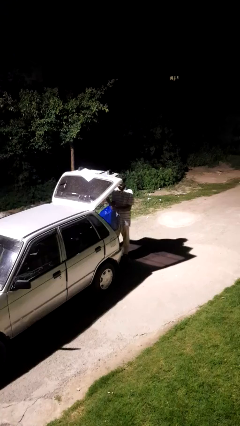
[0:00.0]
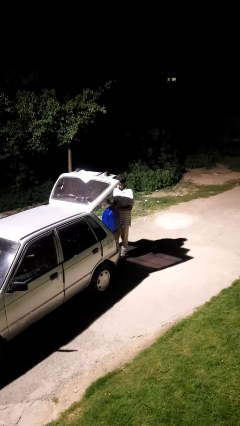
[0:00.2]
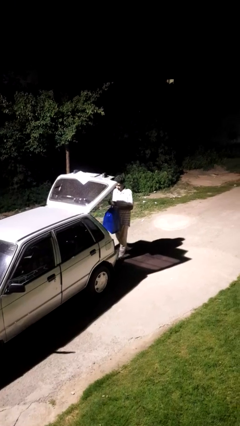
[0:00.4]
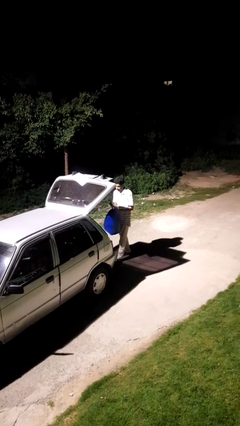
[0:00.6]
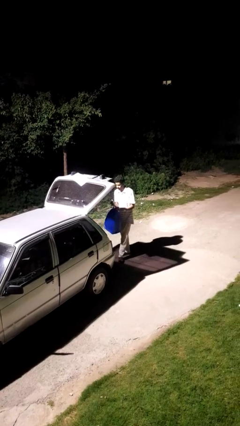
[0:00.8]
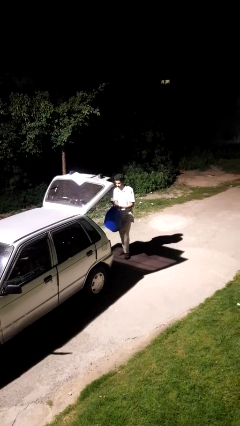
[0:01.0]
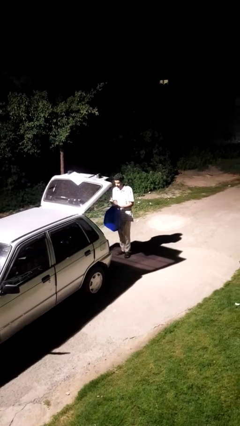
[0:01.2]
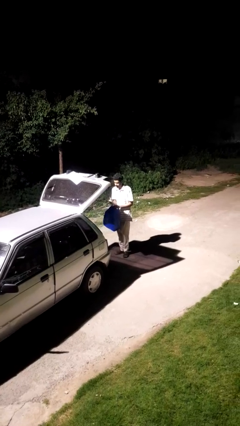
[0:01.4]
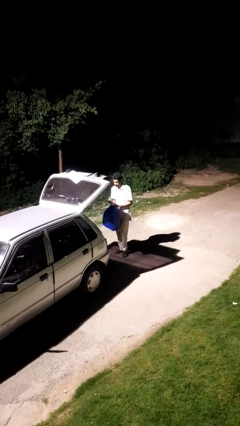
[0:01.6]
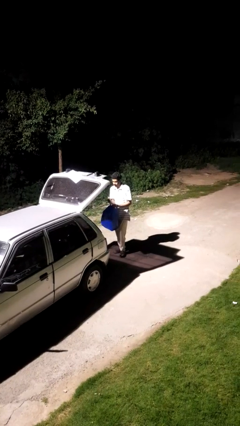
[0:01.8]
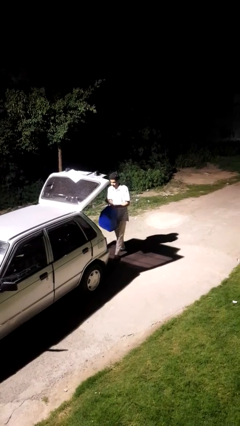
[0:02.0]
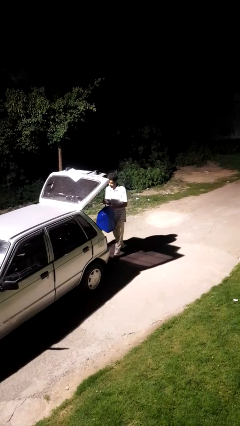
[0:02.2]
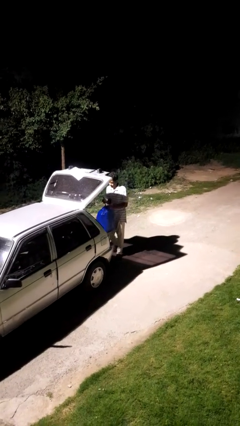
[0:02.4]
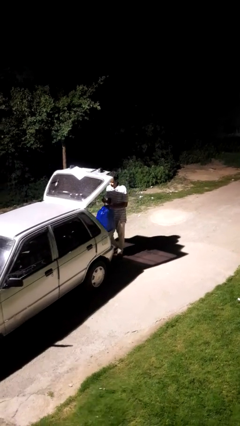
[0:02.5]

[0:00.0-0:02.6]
person unloads car

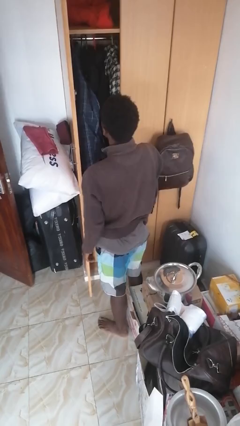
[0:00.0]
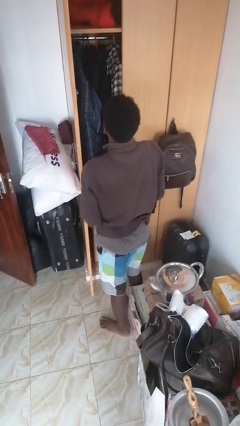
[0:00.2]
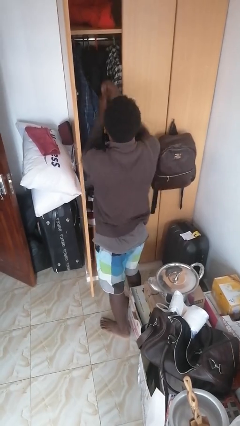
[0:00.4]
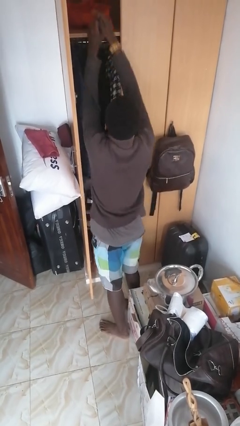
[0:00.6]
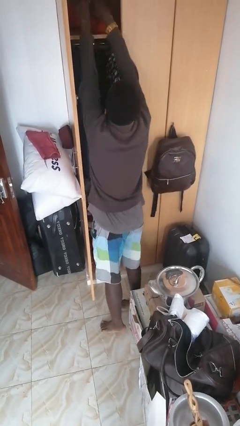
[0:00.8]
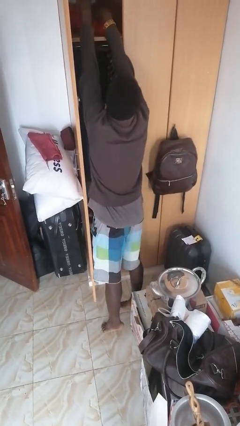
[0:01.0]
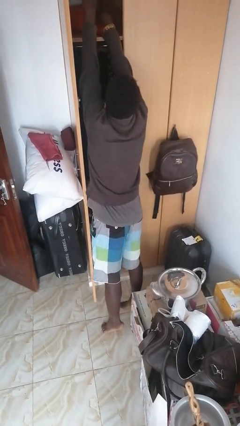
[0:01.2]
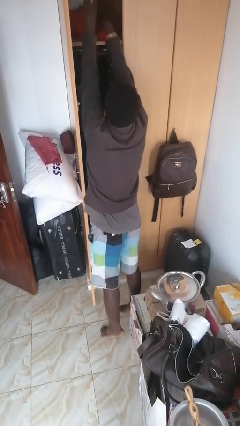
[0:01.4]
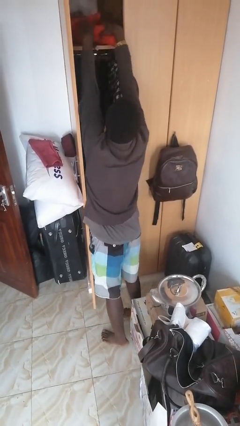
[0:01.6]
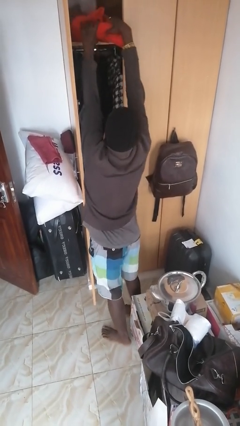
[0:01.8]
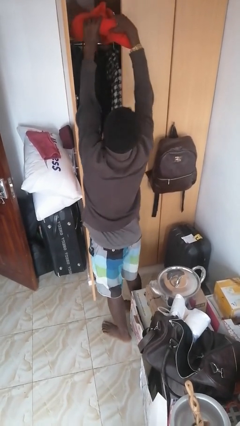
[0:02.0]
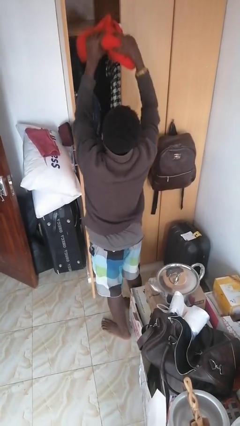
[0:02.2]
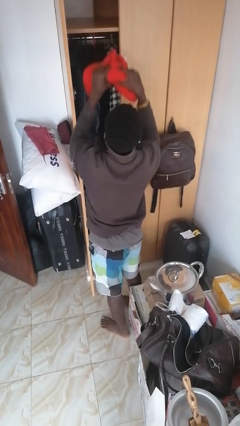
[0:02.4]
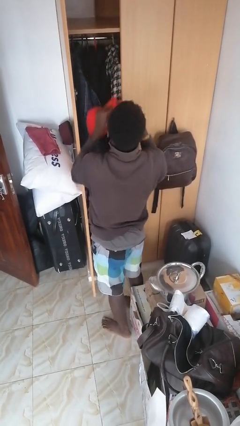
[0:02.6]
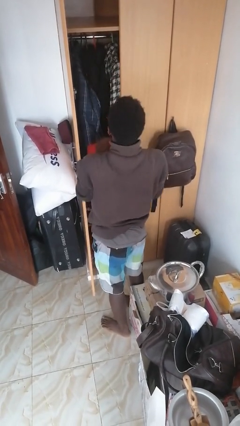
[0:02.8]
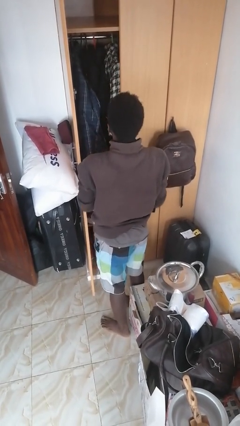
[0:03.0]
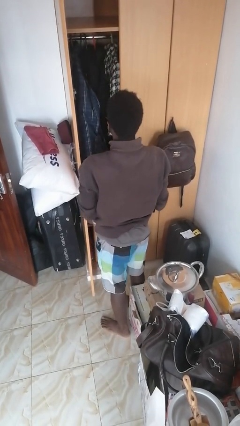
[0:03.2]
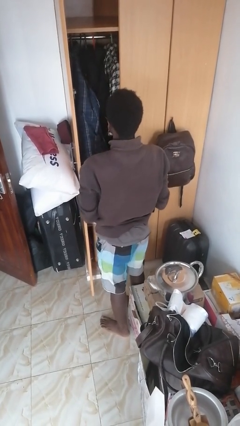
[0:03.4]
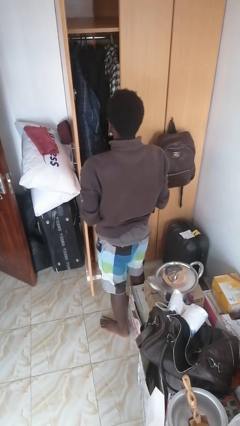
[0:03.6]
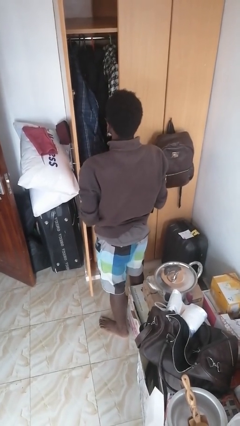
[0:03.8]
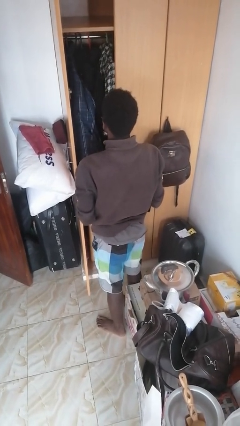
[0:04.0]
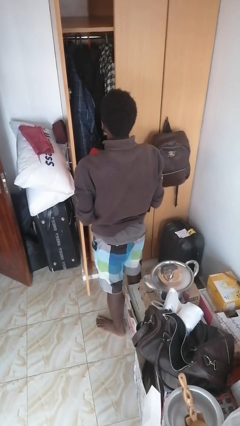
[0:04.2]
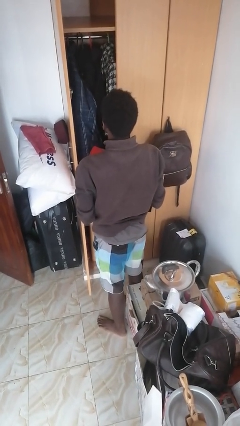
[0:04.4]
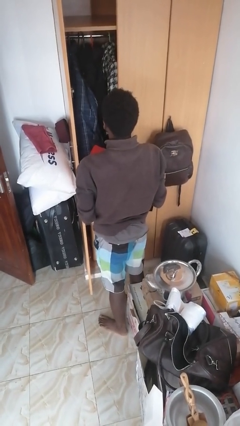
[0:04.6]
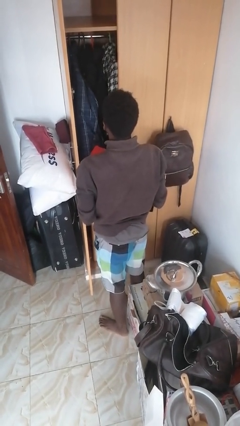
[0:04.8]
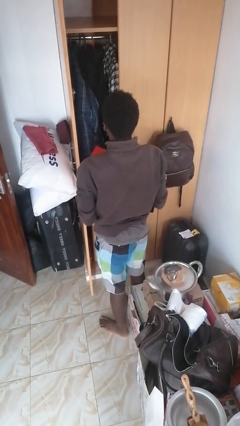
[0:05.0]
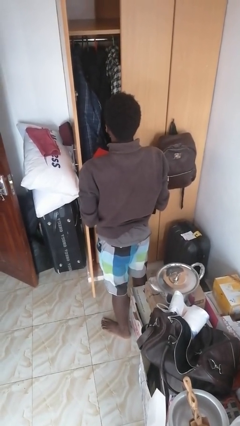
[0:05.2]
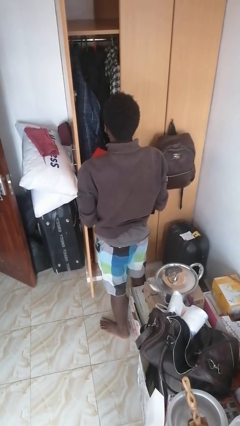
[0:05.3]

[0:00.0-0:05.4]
person picks up object from shelf

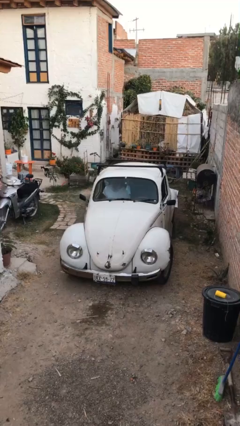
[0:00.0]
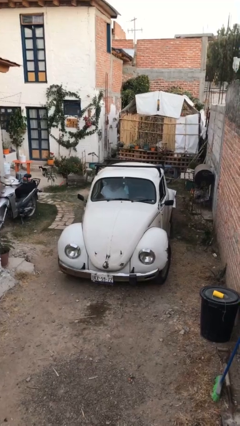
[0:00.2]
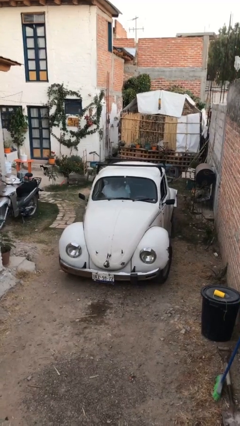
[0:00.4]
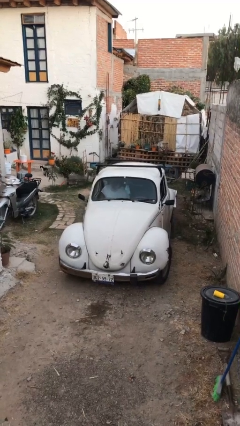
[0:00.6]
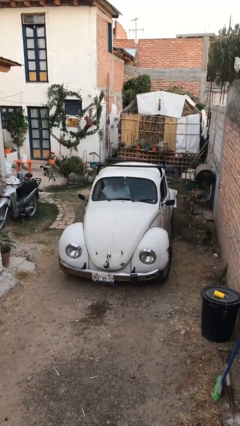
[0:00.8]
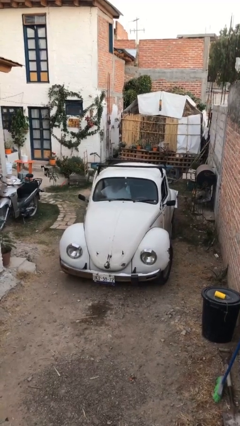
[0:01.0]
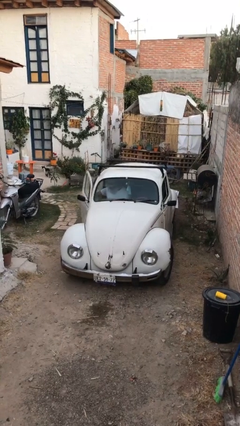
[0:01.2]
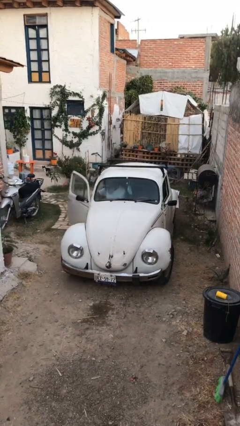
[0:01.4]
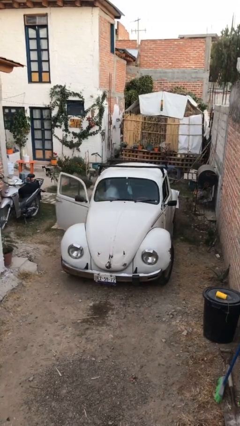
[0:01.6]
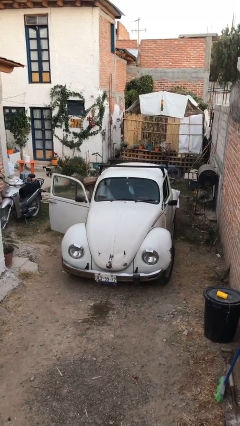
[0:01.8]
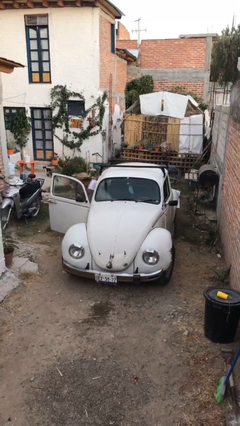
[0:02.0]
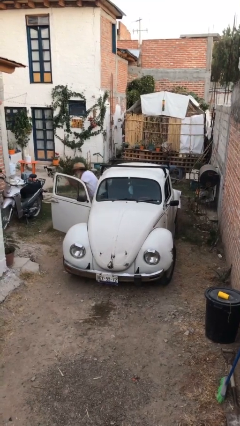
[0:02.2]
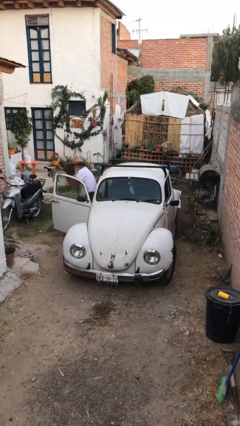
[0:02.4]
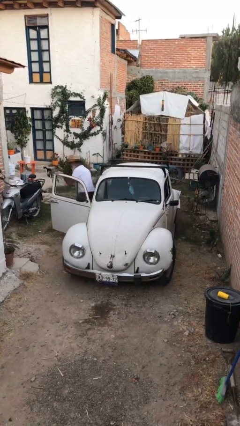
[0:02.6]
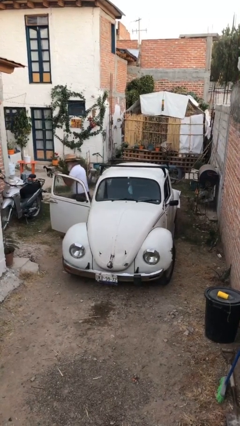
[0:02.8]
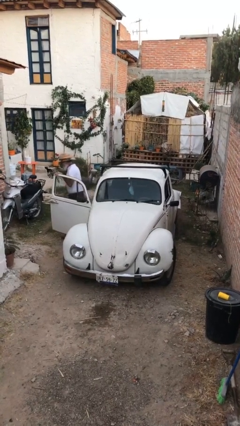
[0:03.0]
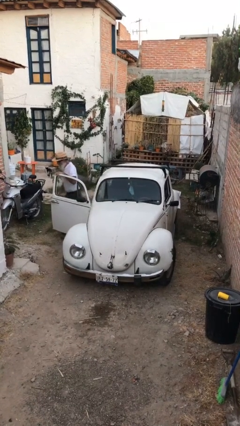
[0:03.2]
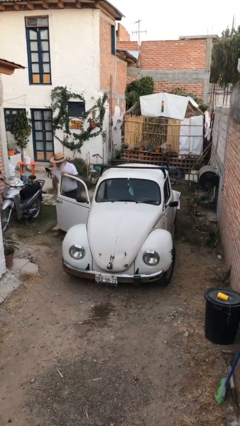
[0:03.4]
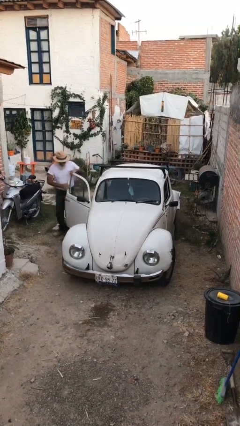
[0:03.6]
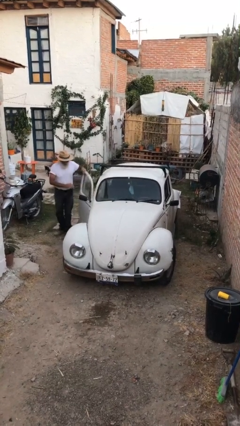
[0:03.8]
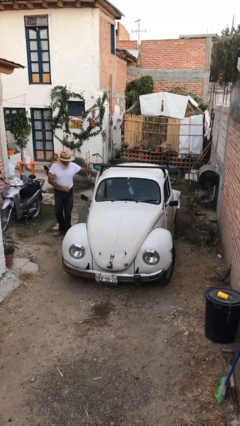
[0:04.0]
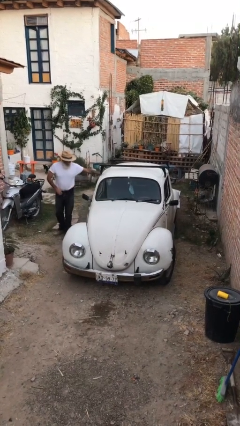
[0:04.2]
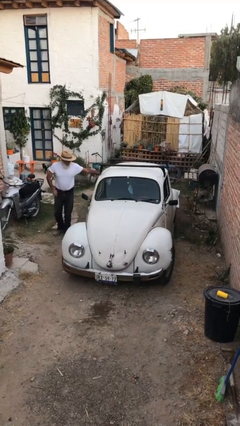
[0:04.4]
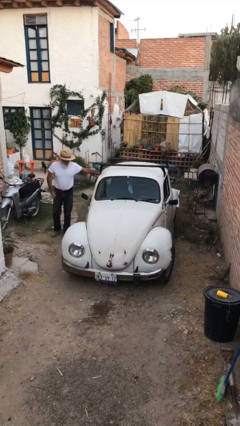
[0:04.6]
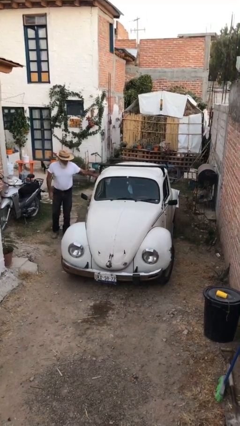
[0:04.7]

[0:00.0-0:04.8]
car drops off person

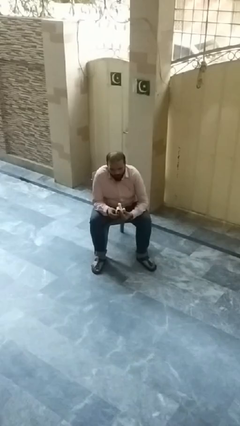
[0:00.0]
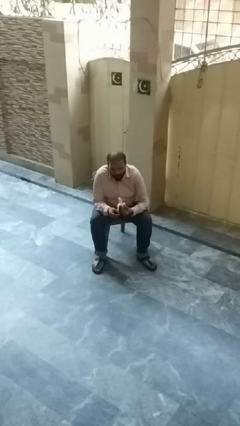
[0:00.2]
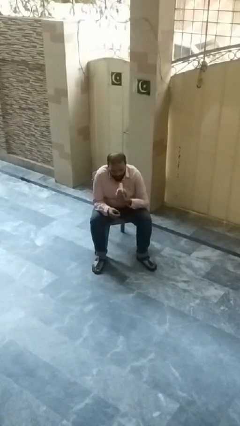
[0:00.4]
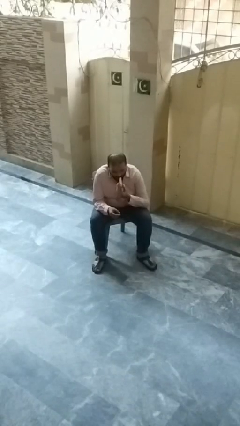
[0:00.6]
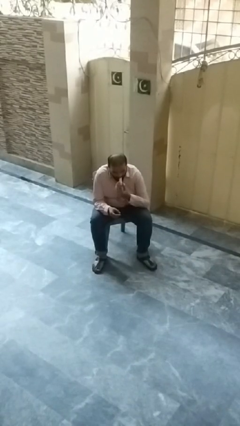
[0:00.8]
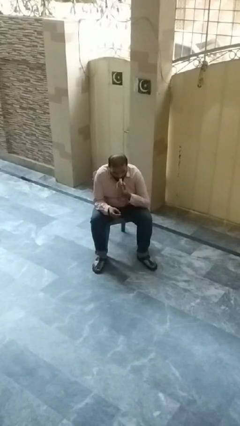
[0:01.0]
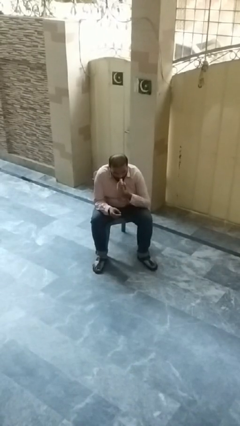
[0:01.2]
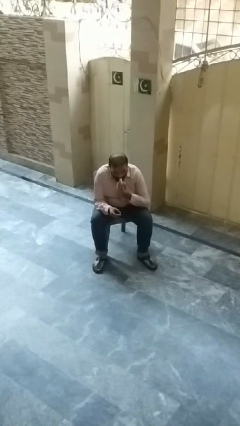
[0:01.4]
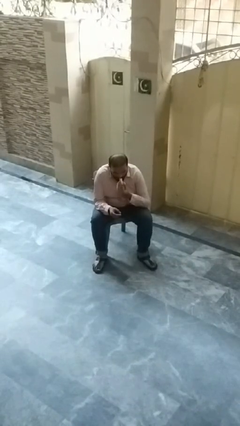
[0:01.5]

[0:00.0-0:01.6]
person eats banana

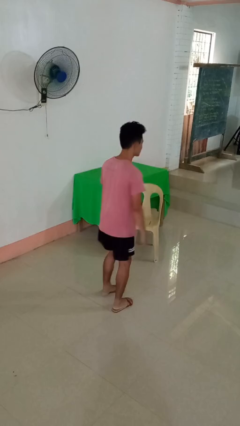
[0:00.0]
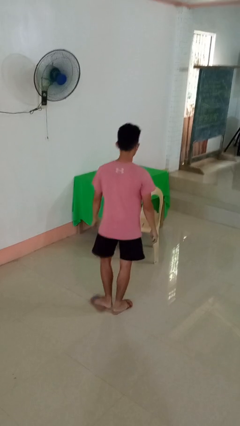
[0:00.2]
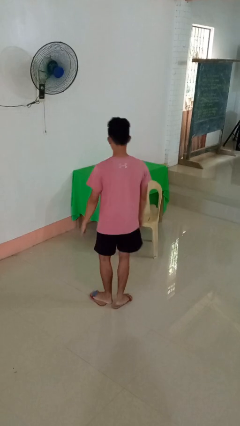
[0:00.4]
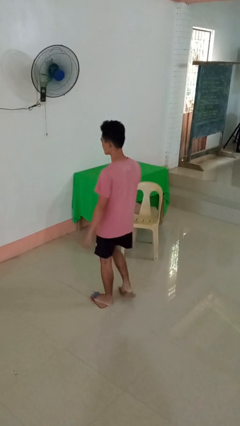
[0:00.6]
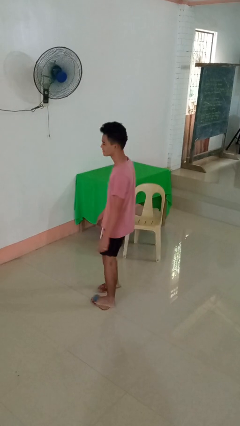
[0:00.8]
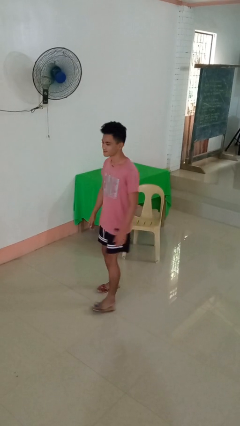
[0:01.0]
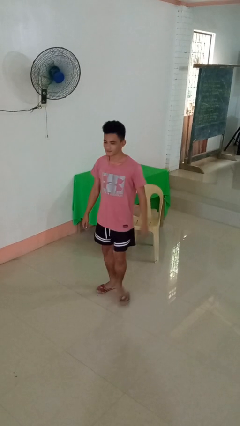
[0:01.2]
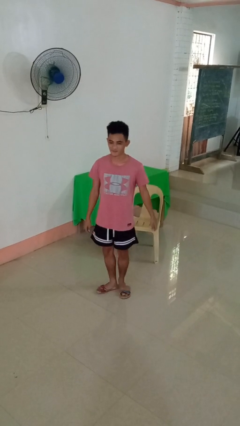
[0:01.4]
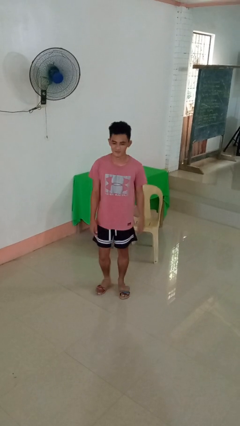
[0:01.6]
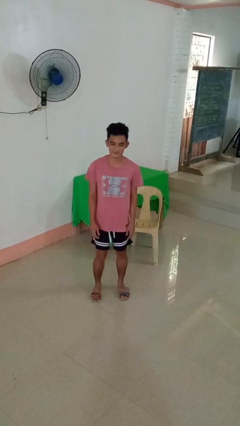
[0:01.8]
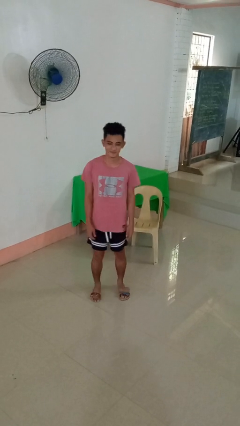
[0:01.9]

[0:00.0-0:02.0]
person twirls

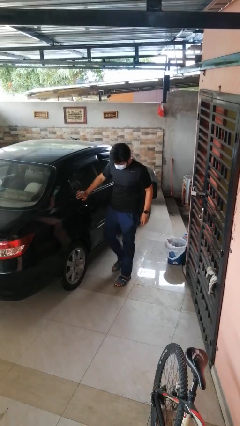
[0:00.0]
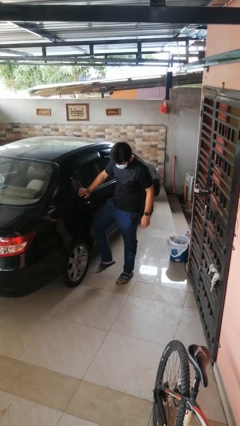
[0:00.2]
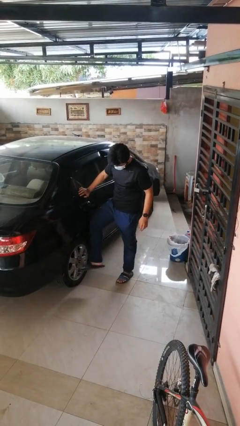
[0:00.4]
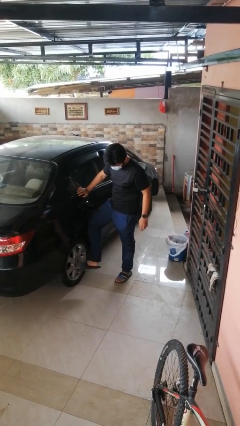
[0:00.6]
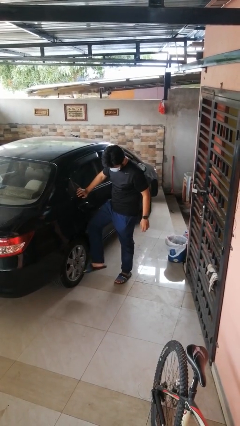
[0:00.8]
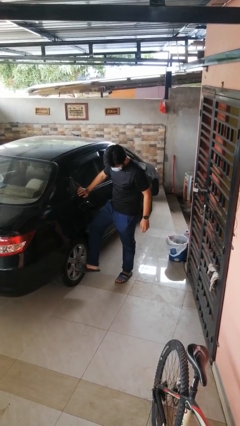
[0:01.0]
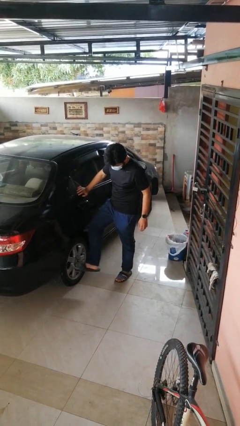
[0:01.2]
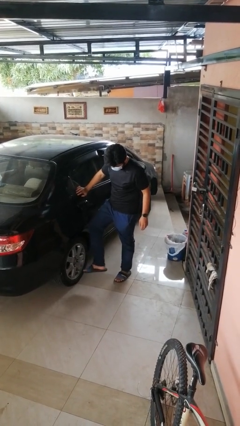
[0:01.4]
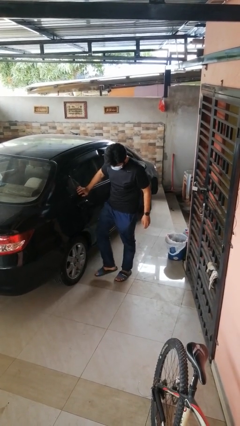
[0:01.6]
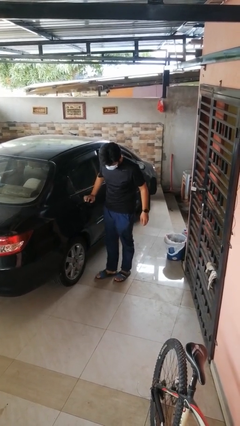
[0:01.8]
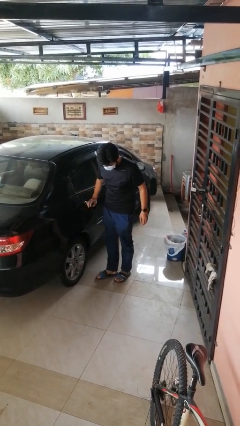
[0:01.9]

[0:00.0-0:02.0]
person kicks car tires
